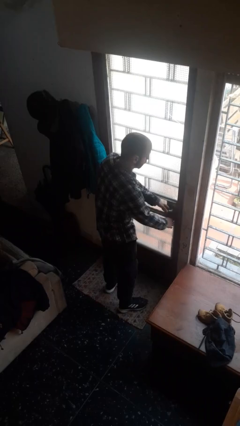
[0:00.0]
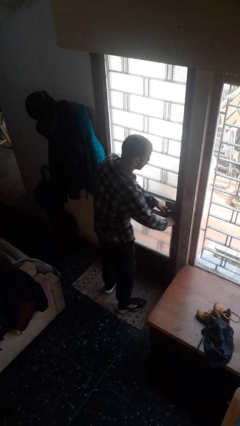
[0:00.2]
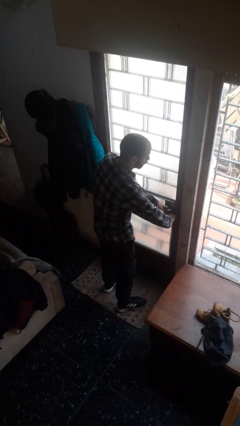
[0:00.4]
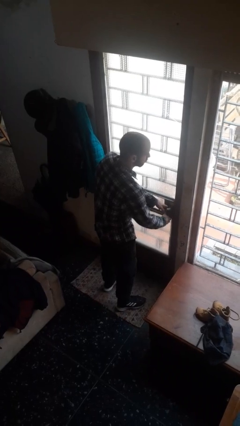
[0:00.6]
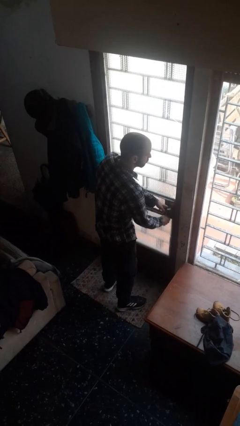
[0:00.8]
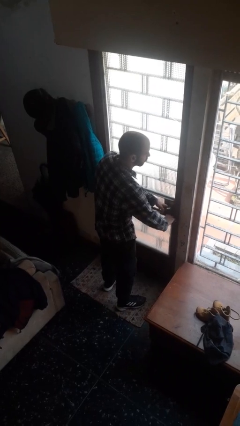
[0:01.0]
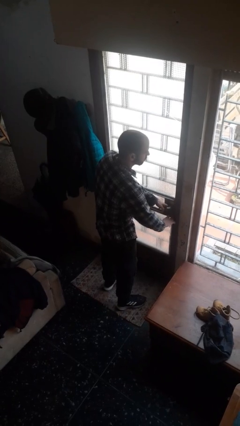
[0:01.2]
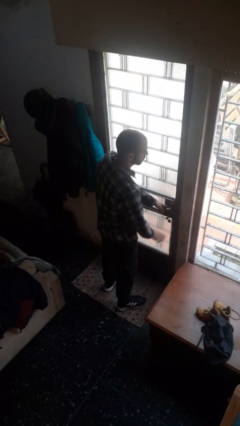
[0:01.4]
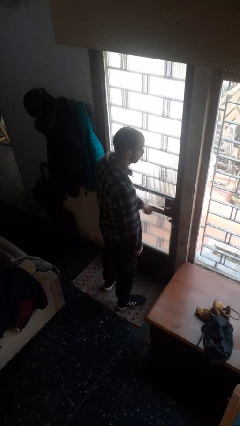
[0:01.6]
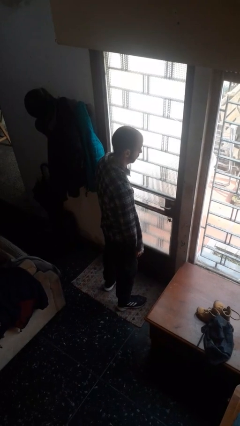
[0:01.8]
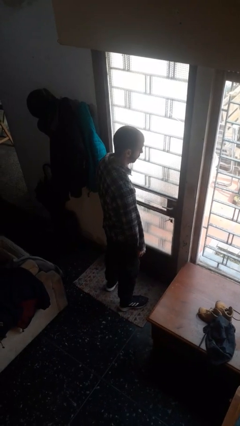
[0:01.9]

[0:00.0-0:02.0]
person unlocks door with keys

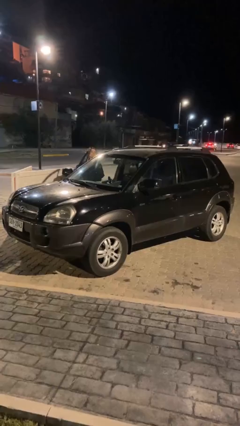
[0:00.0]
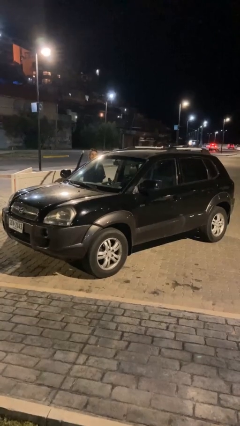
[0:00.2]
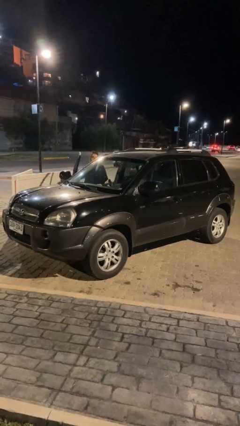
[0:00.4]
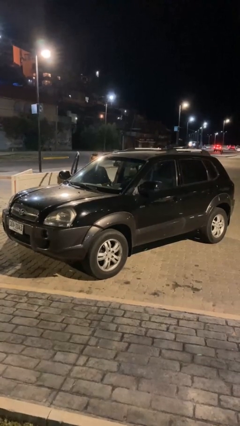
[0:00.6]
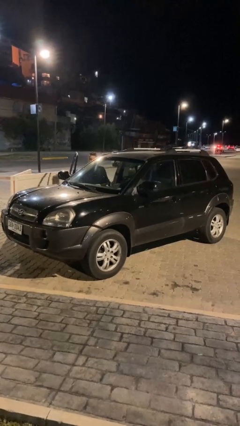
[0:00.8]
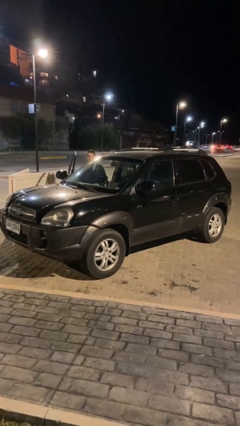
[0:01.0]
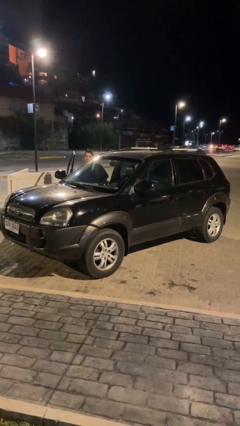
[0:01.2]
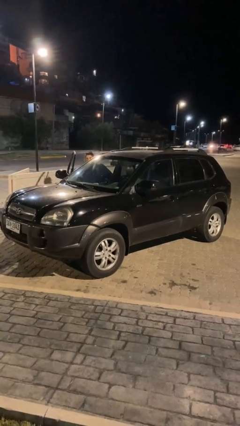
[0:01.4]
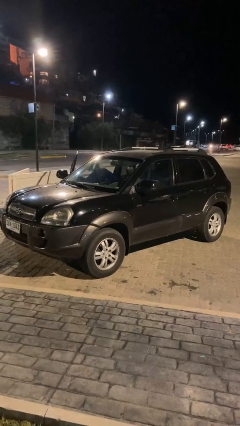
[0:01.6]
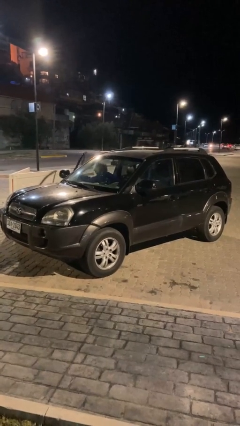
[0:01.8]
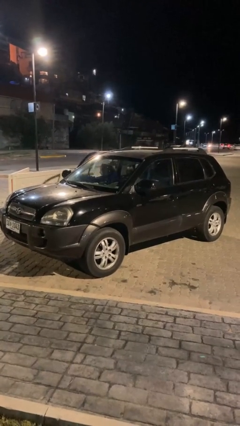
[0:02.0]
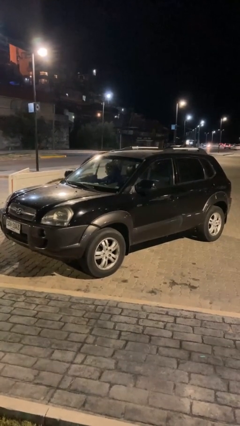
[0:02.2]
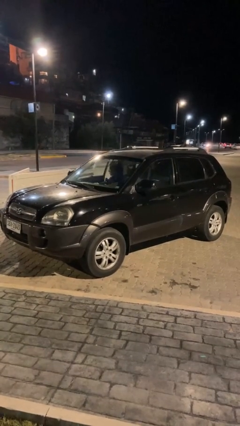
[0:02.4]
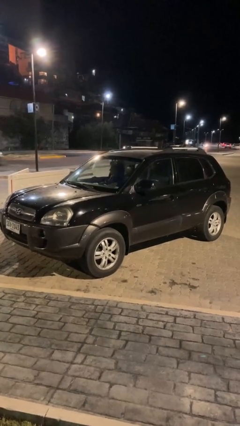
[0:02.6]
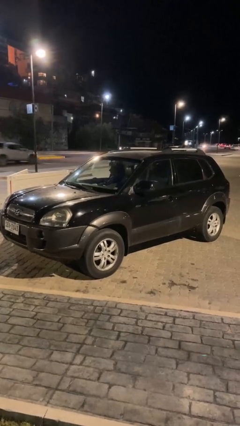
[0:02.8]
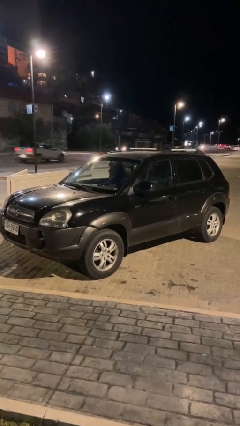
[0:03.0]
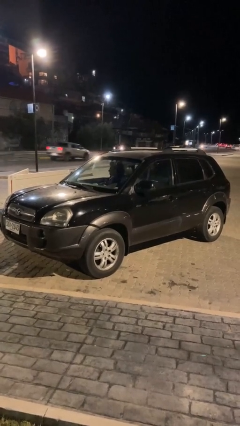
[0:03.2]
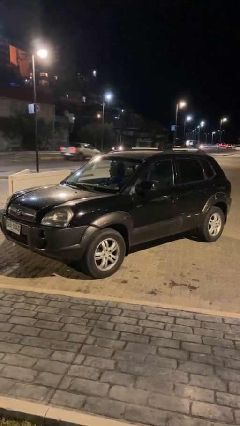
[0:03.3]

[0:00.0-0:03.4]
car picks up person

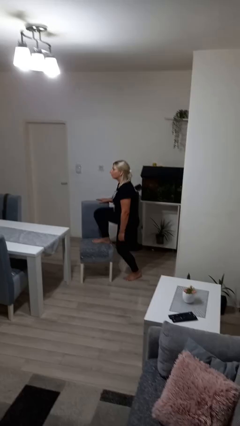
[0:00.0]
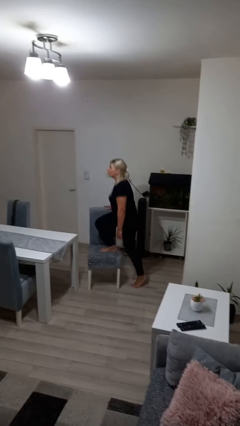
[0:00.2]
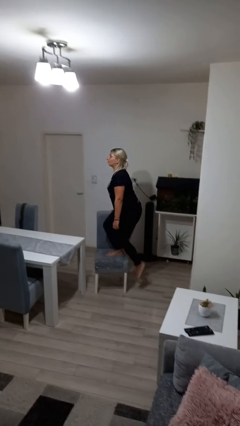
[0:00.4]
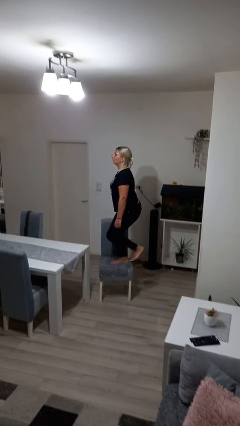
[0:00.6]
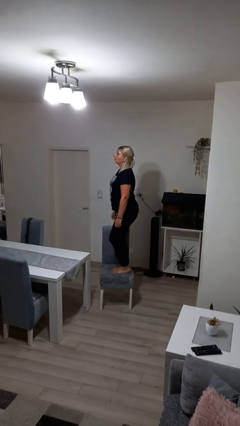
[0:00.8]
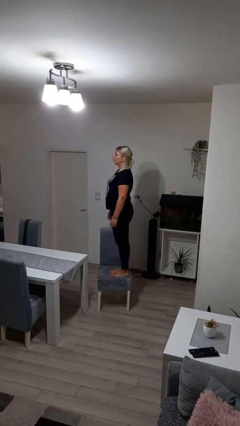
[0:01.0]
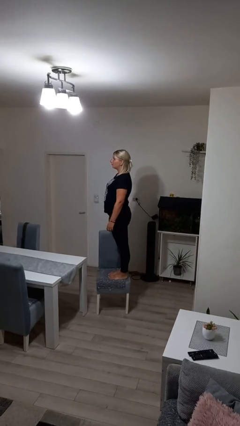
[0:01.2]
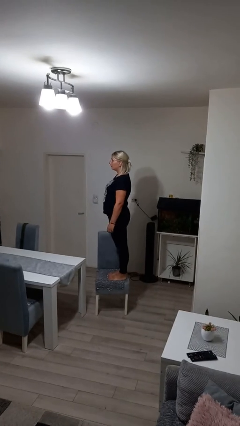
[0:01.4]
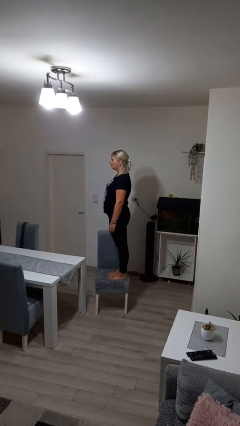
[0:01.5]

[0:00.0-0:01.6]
person climbs on chair

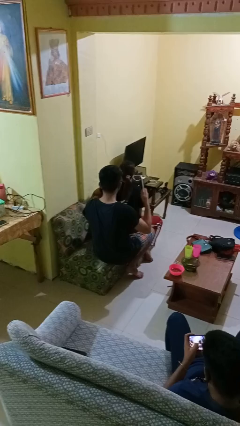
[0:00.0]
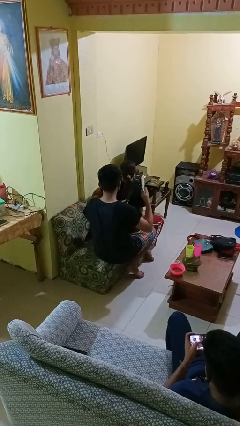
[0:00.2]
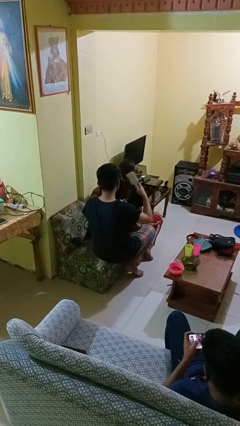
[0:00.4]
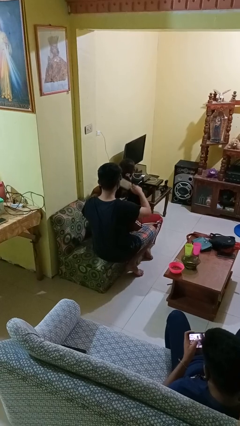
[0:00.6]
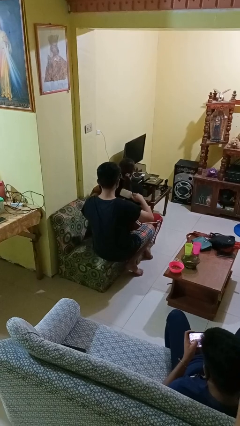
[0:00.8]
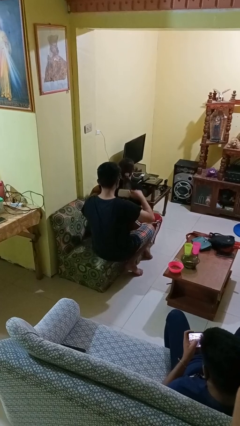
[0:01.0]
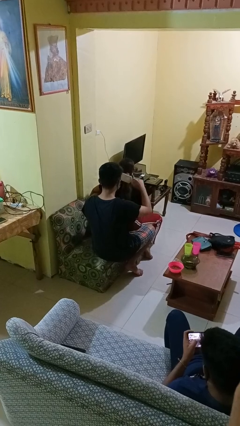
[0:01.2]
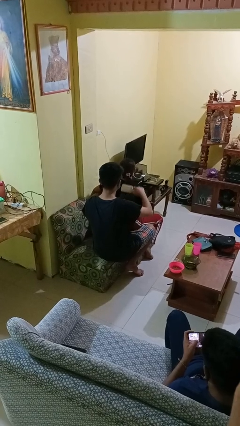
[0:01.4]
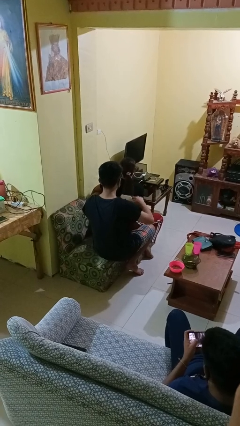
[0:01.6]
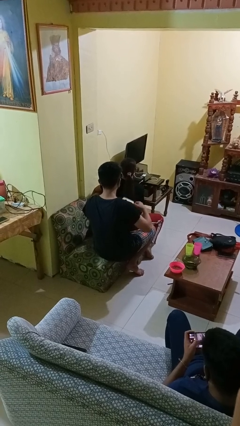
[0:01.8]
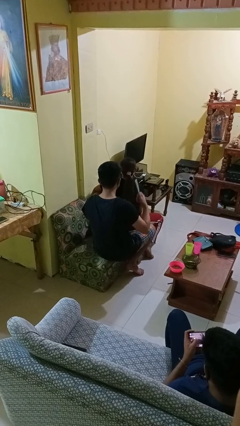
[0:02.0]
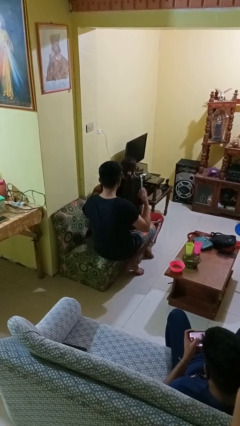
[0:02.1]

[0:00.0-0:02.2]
person brushes hair of person

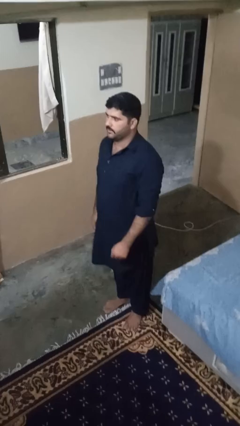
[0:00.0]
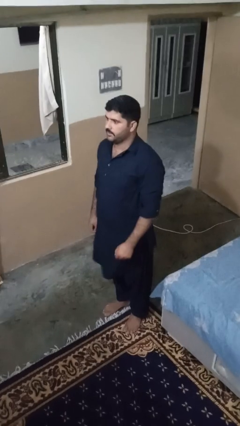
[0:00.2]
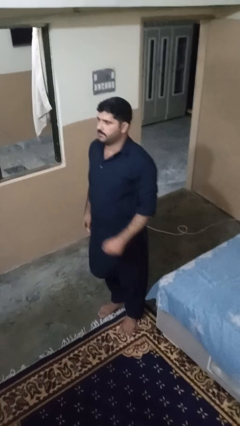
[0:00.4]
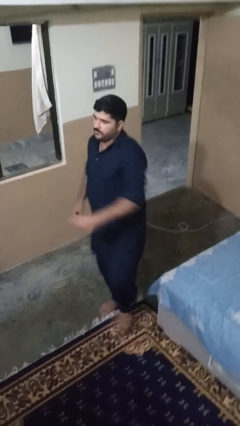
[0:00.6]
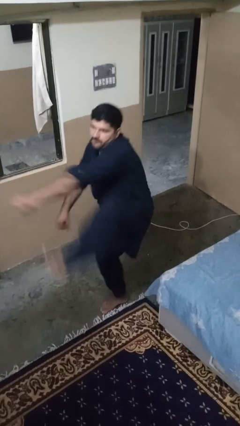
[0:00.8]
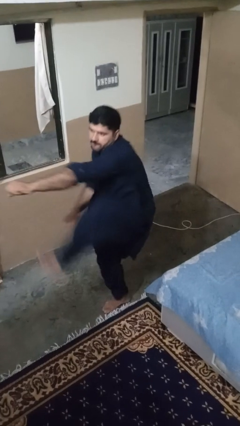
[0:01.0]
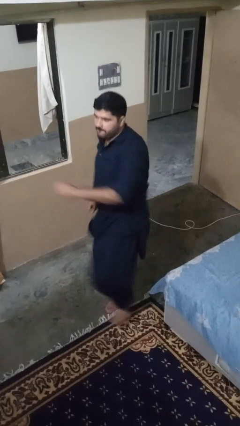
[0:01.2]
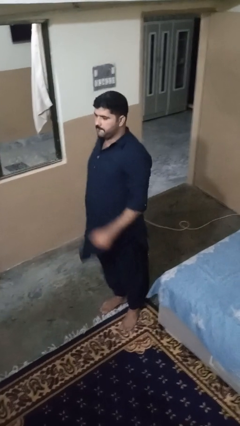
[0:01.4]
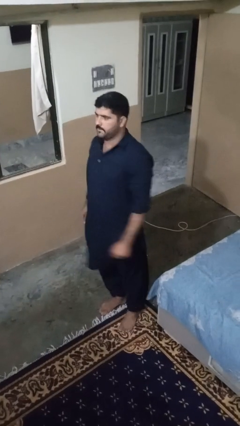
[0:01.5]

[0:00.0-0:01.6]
person karate kicks

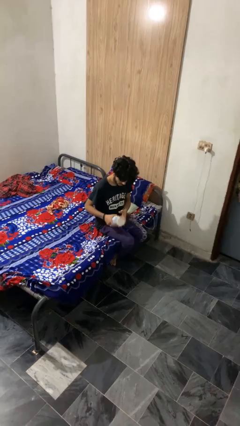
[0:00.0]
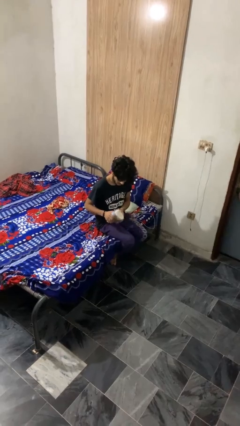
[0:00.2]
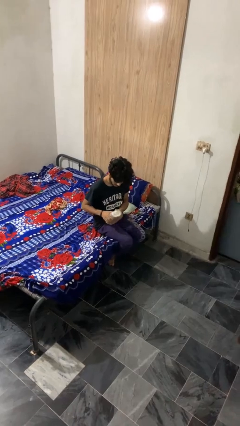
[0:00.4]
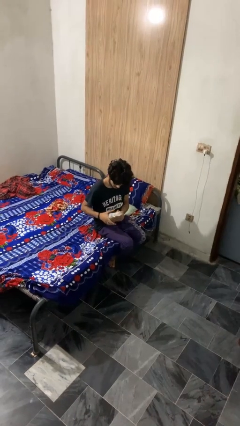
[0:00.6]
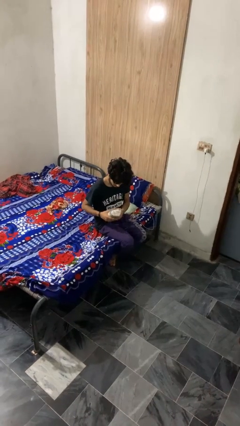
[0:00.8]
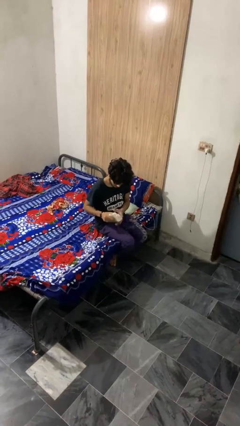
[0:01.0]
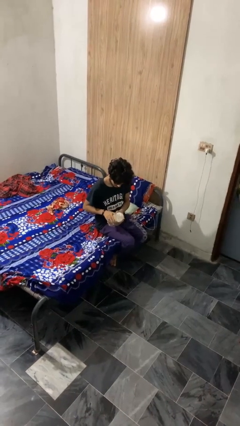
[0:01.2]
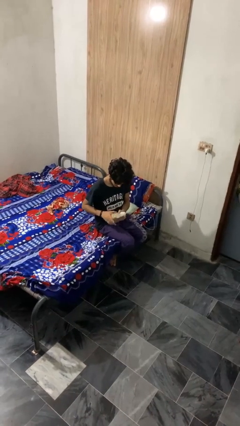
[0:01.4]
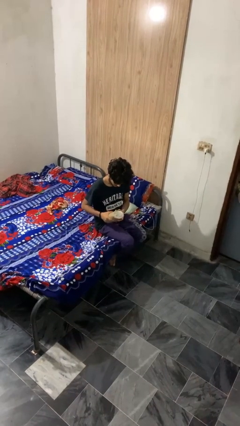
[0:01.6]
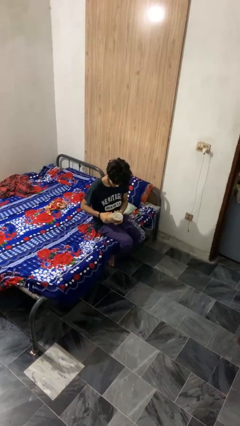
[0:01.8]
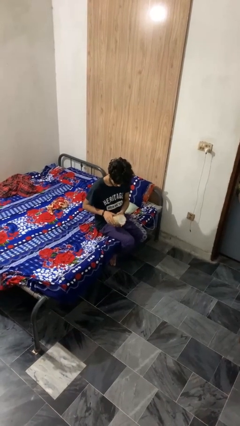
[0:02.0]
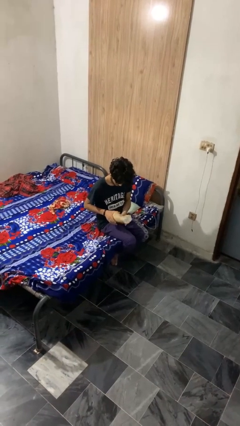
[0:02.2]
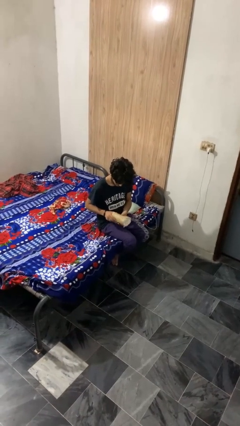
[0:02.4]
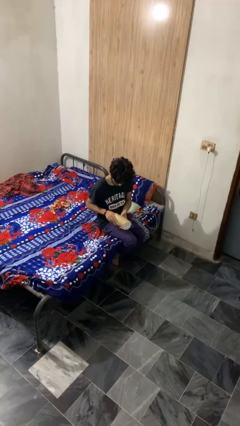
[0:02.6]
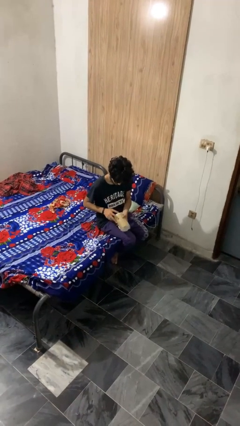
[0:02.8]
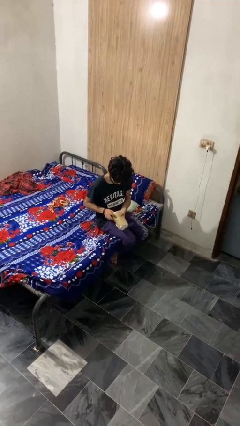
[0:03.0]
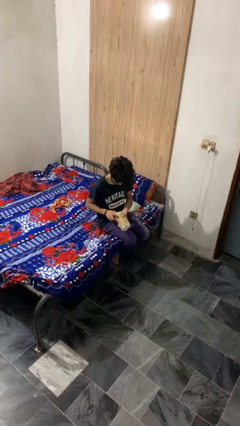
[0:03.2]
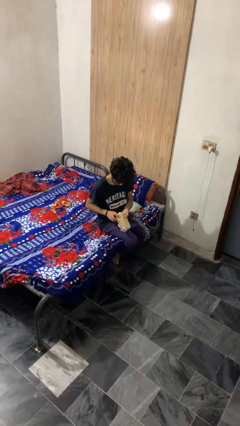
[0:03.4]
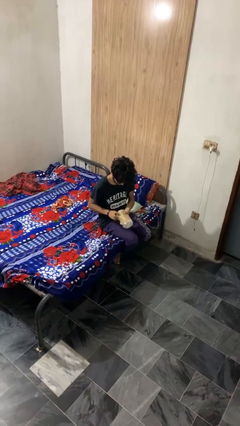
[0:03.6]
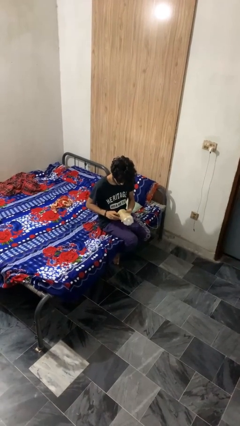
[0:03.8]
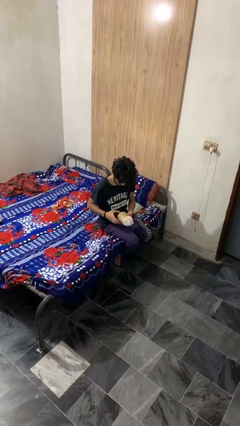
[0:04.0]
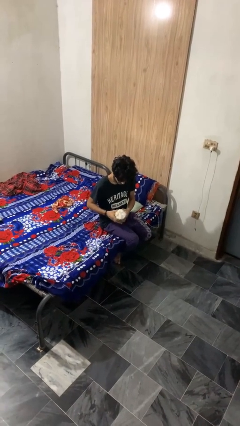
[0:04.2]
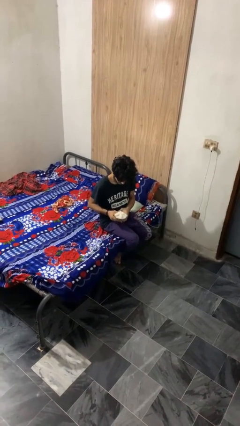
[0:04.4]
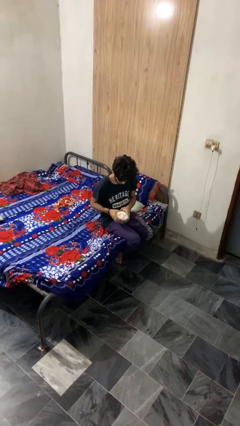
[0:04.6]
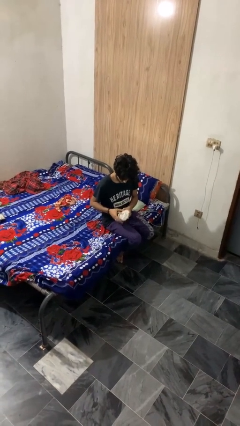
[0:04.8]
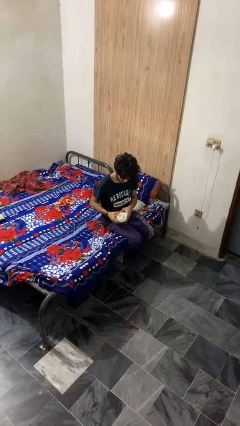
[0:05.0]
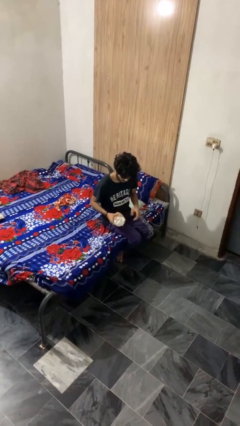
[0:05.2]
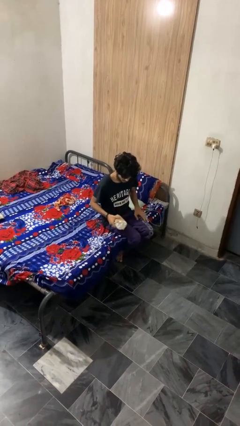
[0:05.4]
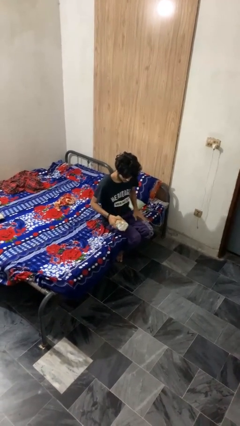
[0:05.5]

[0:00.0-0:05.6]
person squeezes object

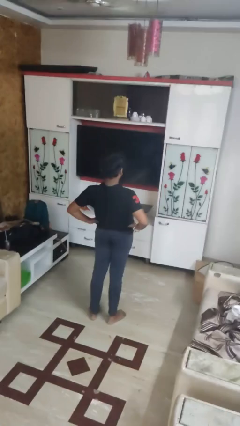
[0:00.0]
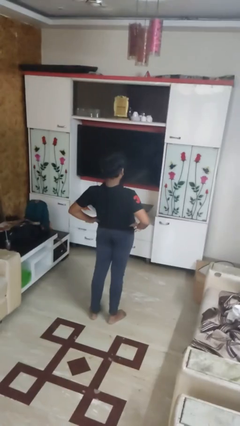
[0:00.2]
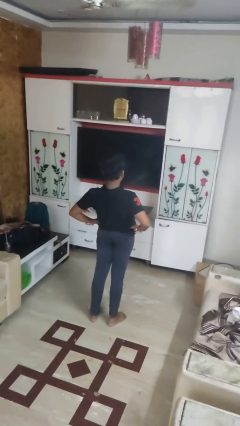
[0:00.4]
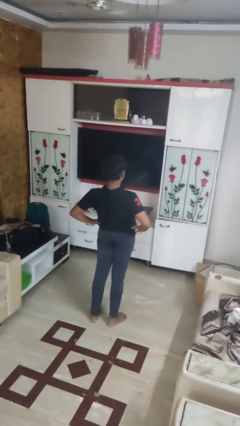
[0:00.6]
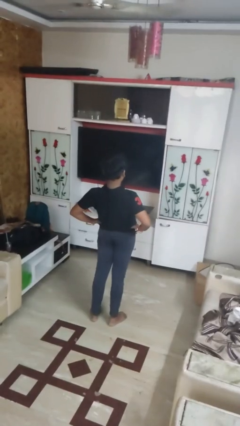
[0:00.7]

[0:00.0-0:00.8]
person stretches back
